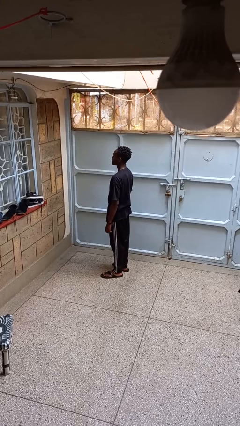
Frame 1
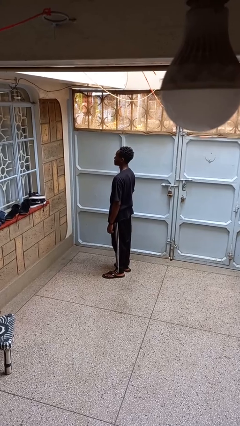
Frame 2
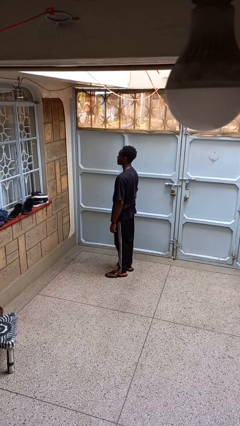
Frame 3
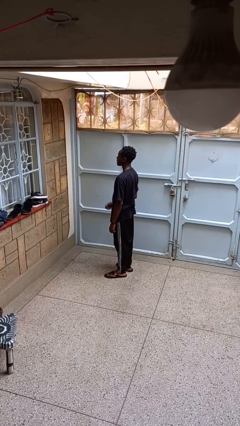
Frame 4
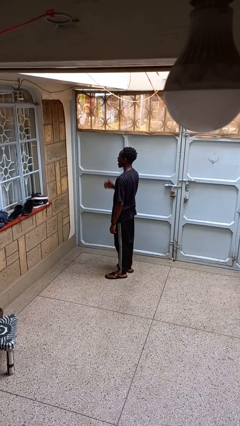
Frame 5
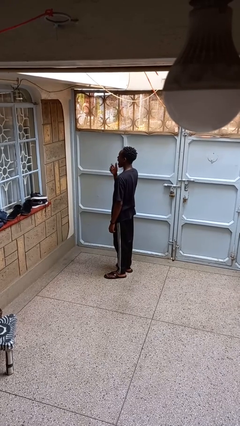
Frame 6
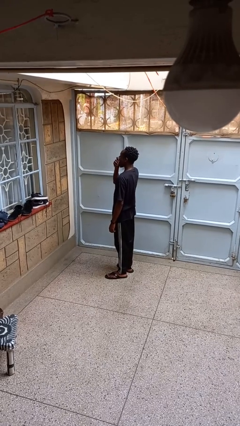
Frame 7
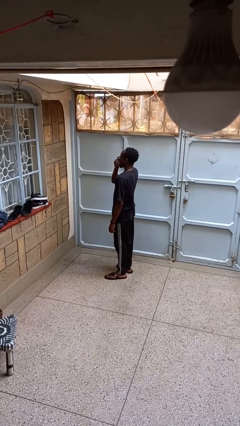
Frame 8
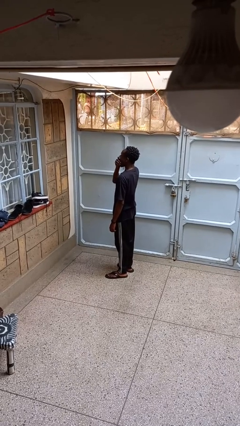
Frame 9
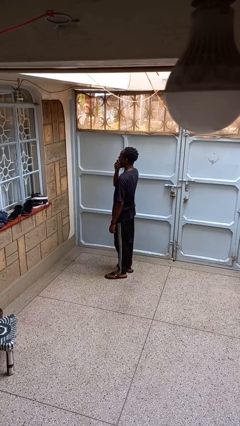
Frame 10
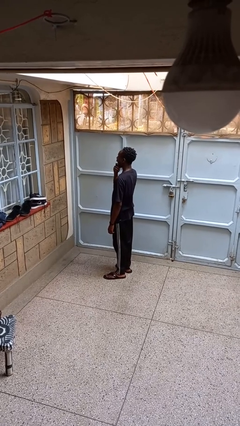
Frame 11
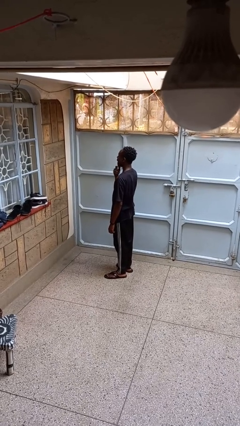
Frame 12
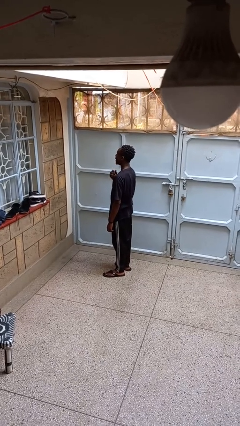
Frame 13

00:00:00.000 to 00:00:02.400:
person yawns

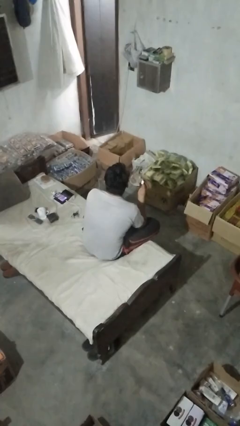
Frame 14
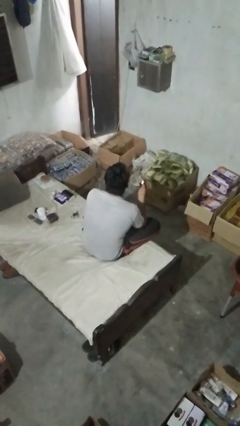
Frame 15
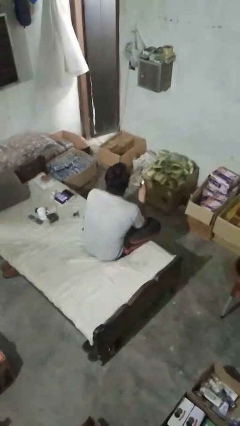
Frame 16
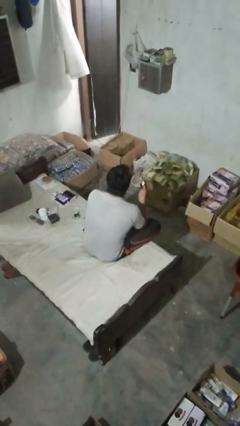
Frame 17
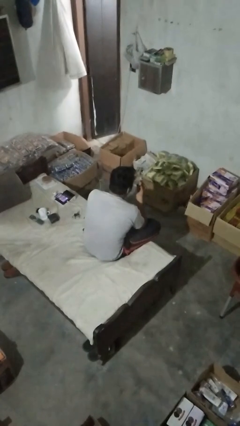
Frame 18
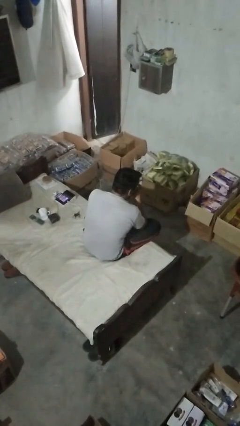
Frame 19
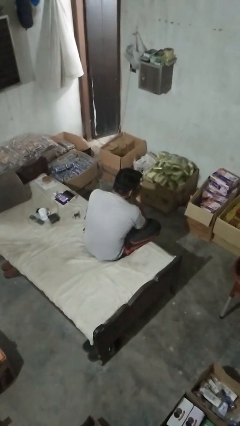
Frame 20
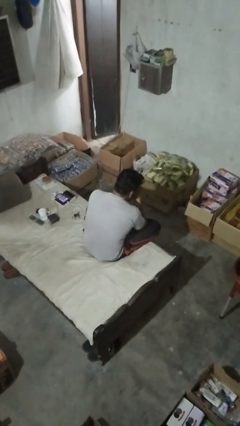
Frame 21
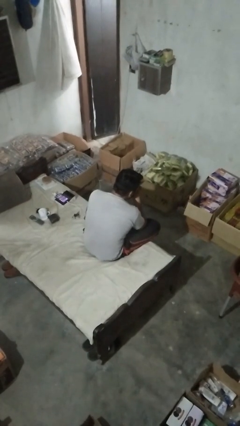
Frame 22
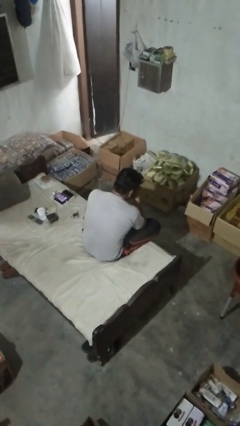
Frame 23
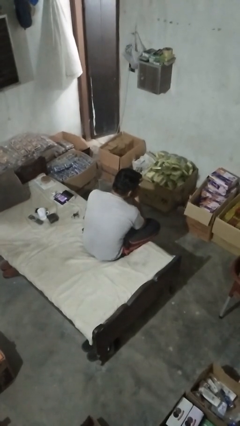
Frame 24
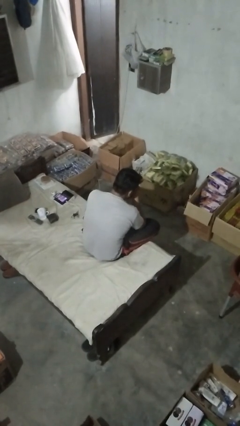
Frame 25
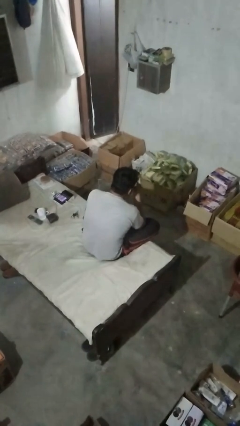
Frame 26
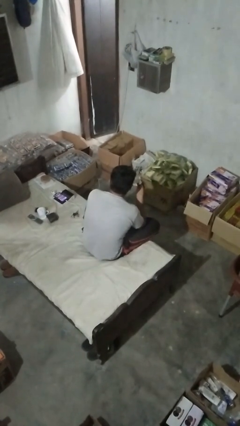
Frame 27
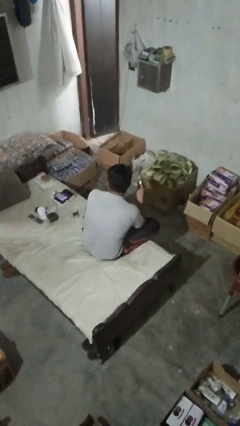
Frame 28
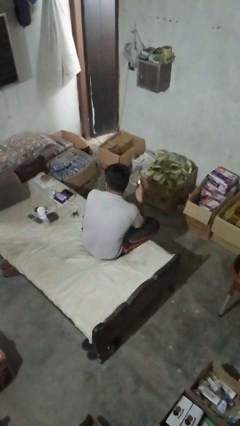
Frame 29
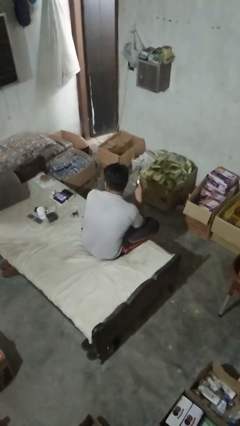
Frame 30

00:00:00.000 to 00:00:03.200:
person blows nose

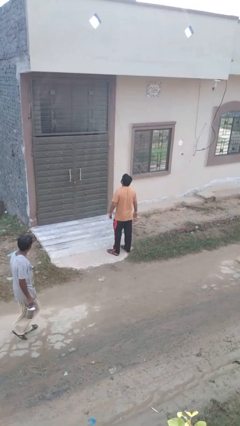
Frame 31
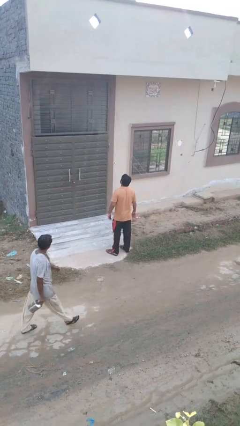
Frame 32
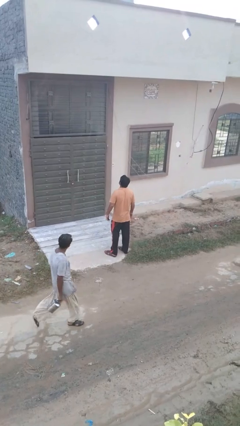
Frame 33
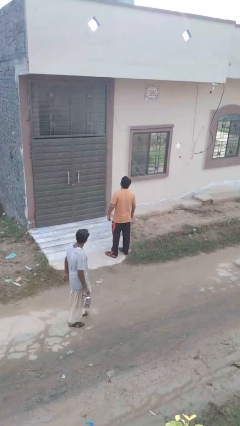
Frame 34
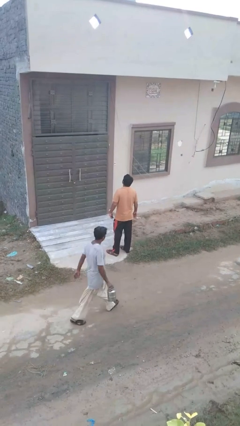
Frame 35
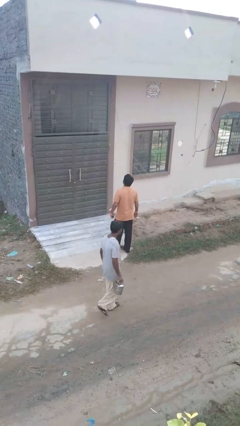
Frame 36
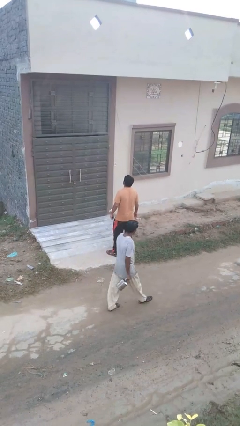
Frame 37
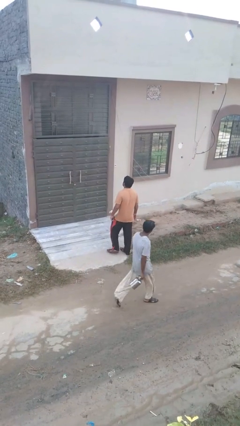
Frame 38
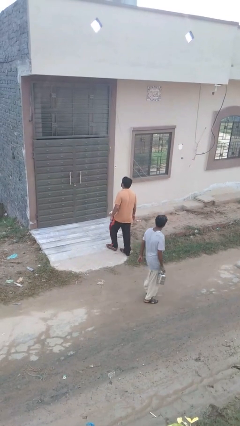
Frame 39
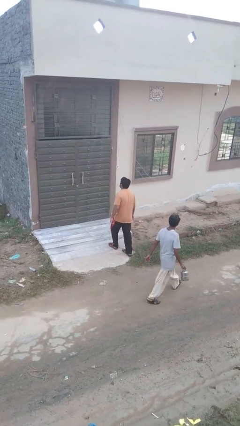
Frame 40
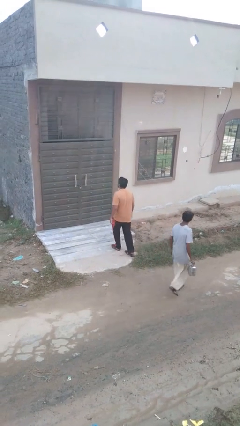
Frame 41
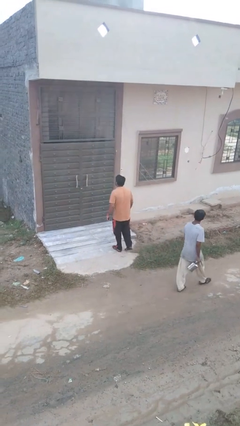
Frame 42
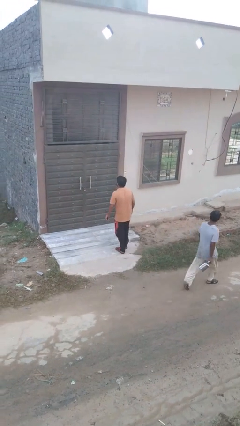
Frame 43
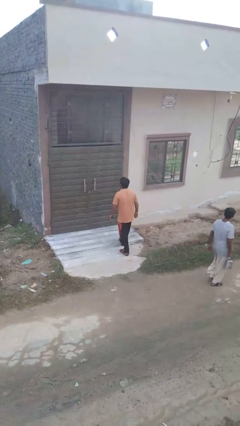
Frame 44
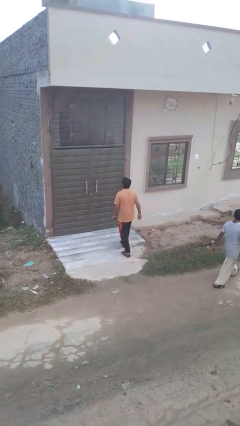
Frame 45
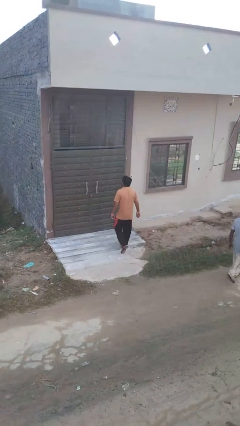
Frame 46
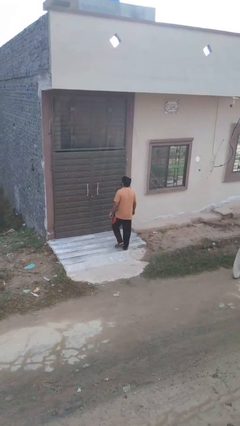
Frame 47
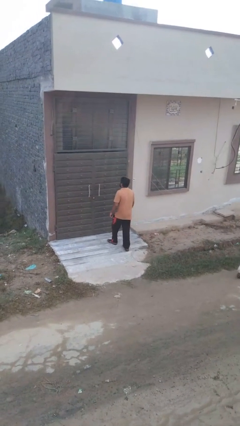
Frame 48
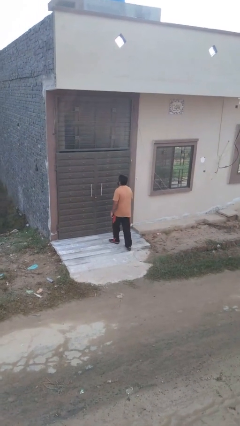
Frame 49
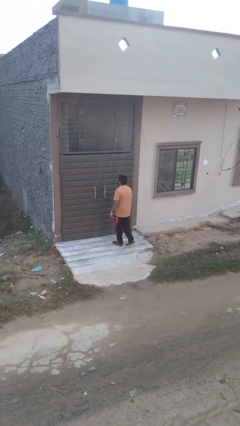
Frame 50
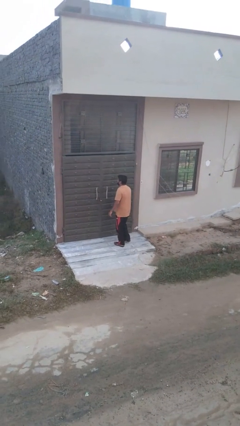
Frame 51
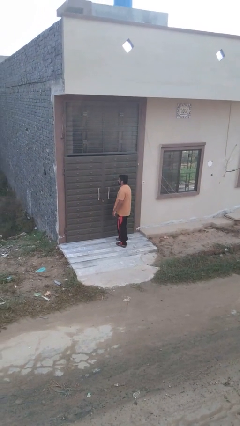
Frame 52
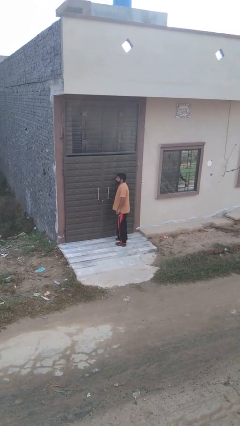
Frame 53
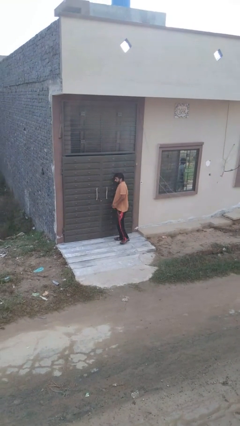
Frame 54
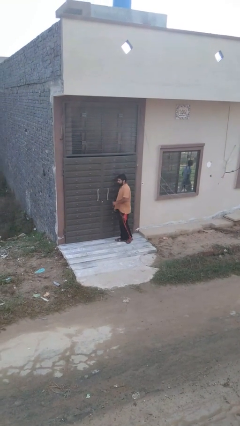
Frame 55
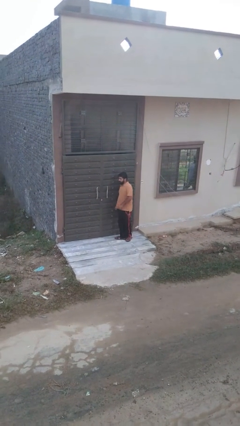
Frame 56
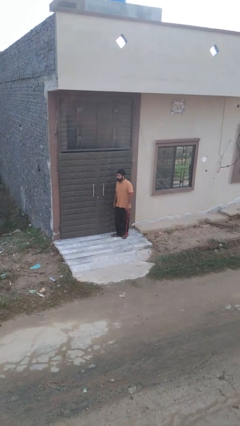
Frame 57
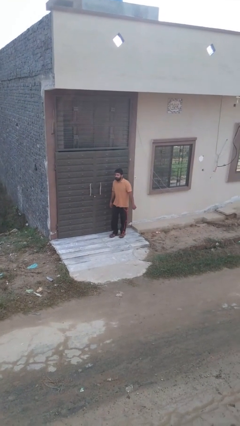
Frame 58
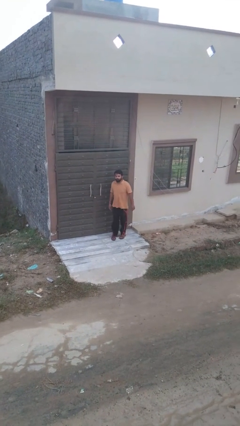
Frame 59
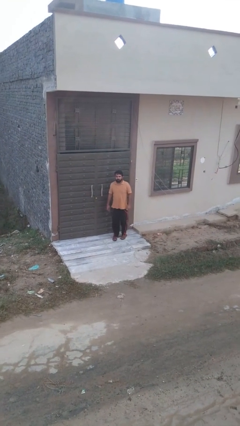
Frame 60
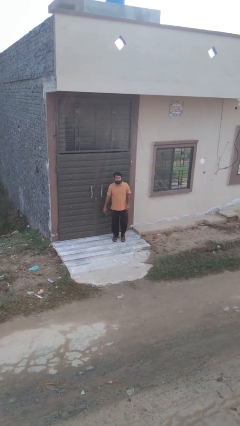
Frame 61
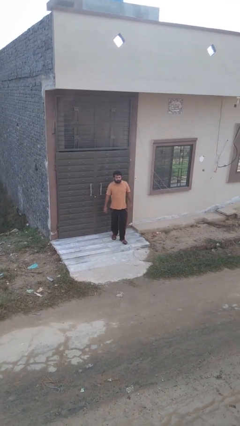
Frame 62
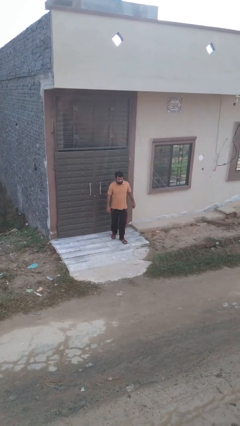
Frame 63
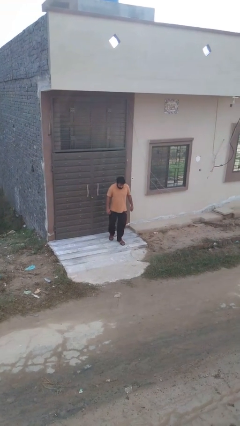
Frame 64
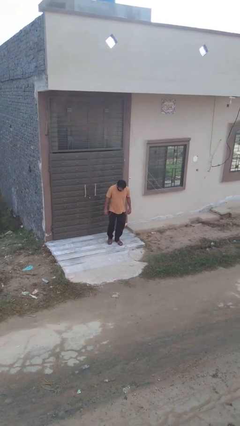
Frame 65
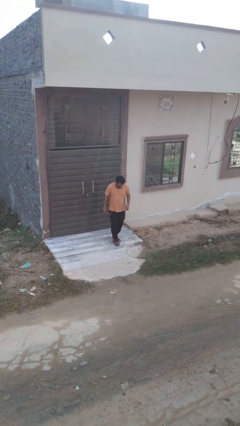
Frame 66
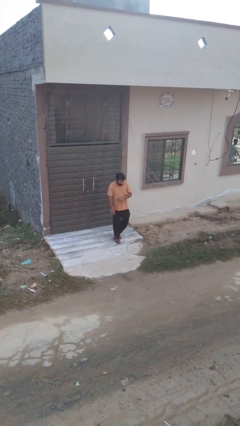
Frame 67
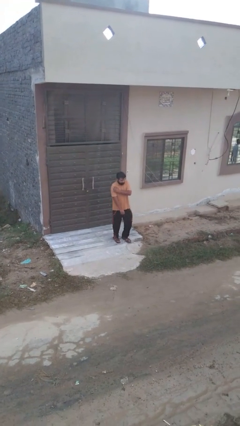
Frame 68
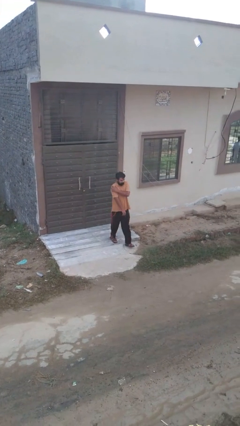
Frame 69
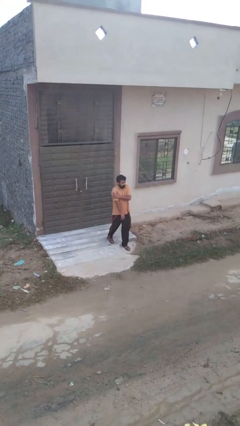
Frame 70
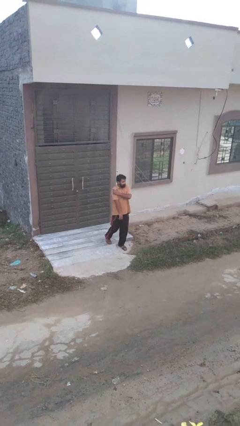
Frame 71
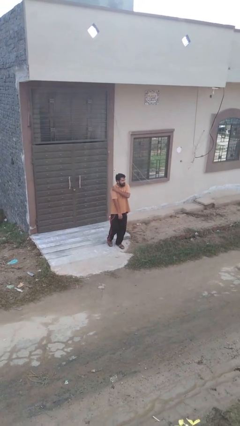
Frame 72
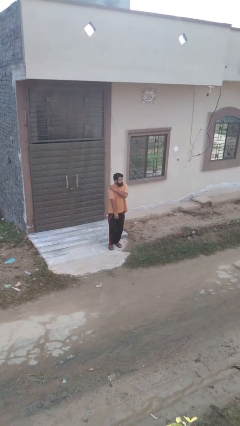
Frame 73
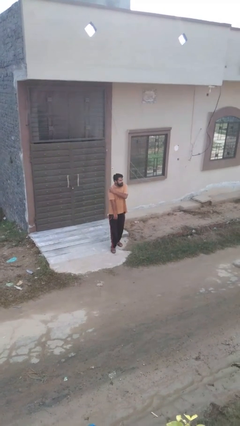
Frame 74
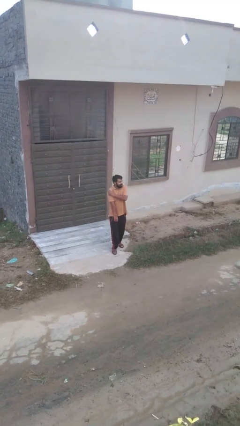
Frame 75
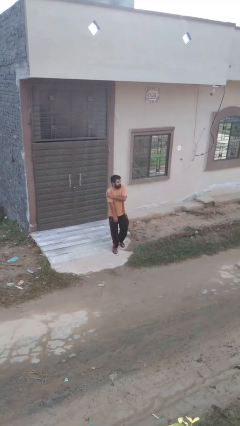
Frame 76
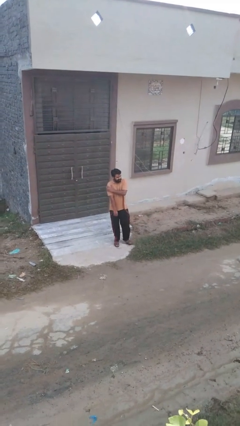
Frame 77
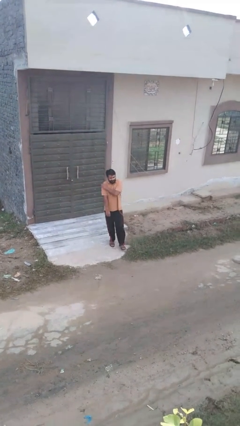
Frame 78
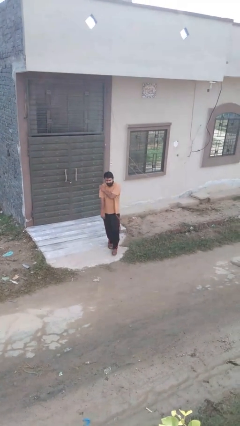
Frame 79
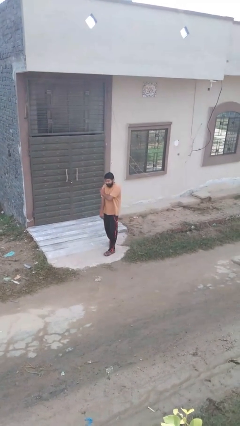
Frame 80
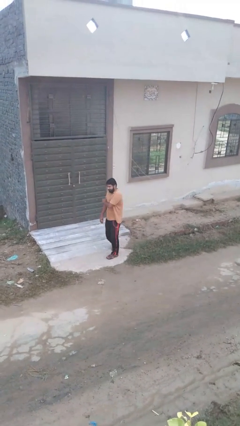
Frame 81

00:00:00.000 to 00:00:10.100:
person bumps into wall

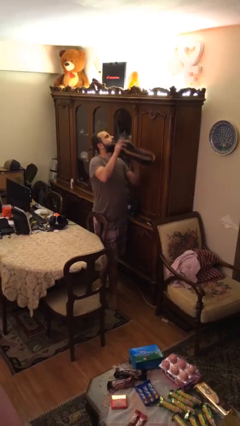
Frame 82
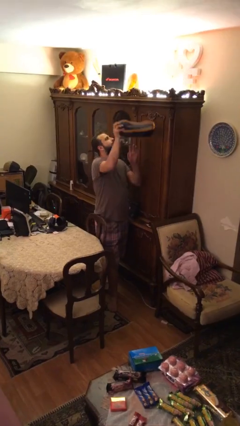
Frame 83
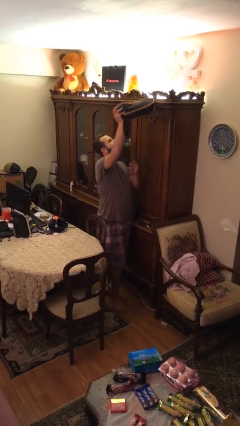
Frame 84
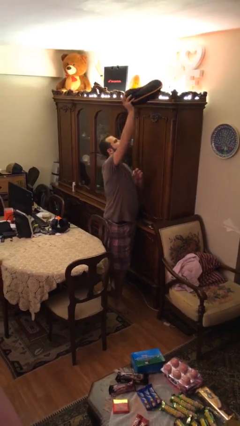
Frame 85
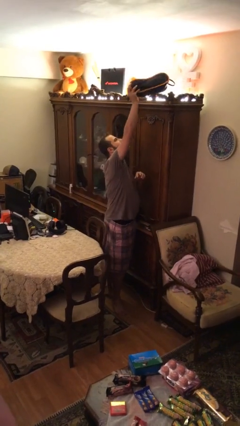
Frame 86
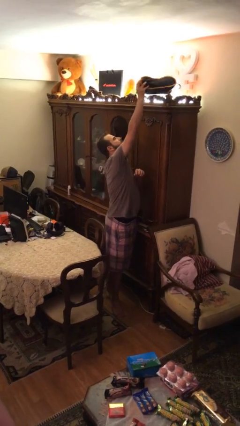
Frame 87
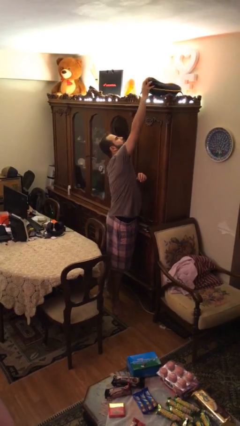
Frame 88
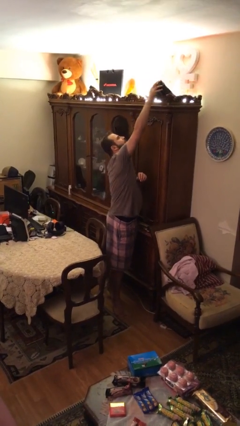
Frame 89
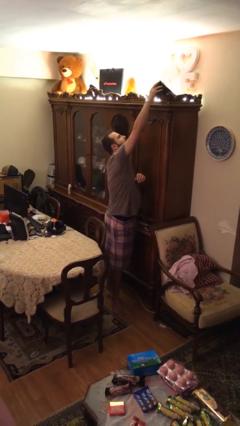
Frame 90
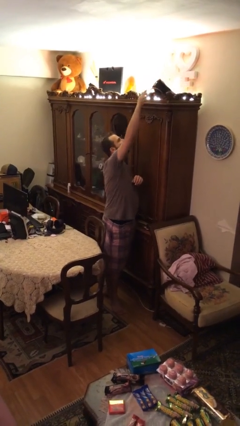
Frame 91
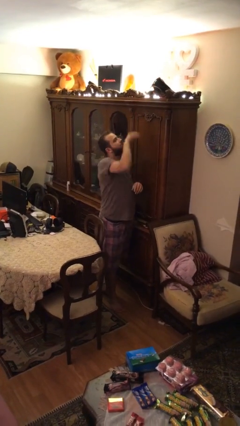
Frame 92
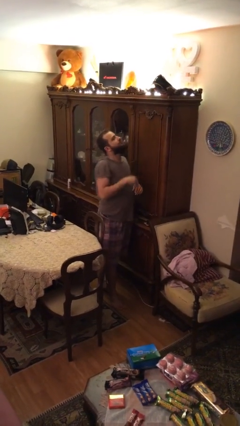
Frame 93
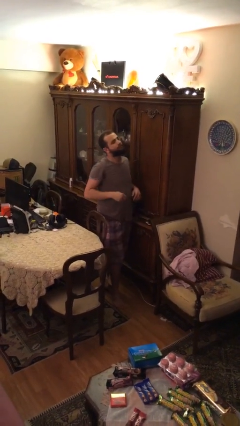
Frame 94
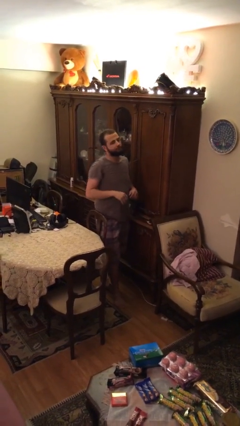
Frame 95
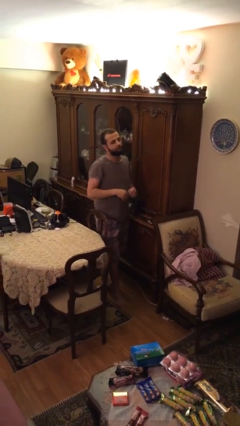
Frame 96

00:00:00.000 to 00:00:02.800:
person puts down object on shelf
